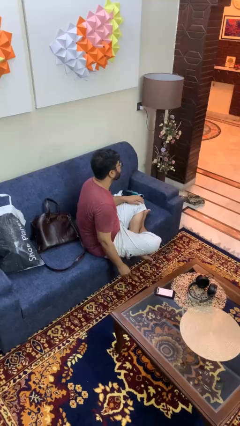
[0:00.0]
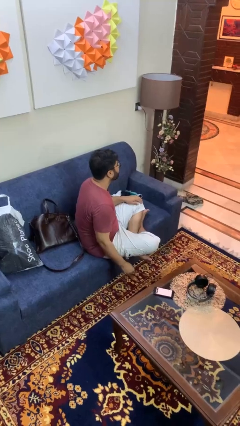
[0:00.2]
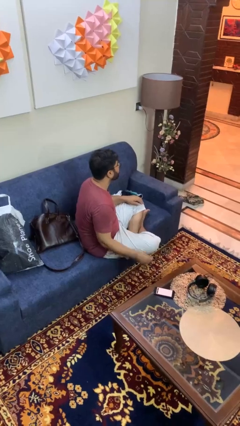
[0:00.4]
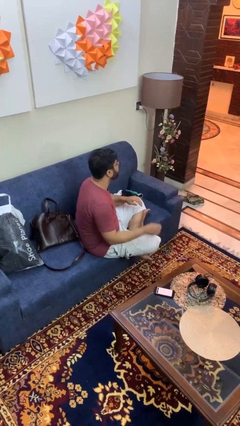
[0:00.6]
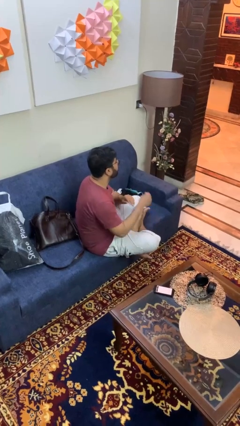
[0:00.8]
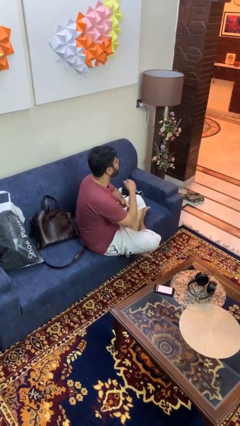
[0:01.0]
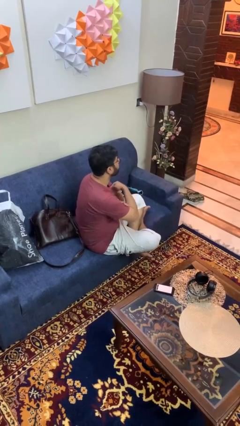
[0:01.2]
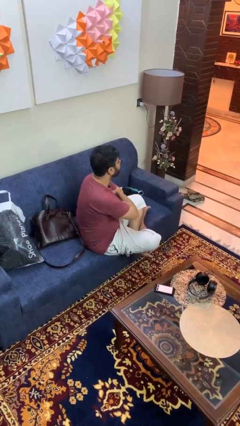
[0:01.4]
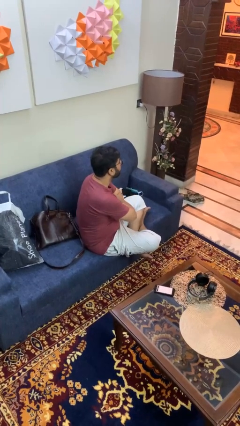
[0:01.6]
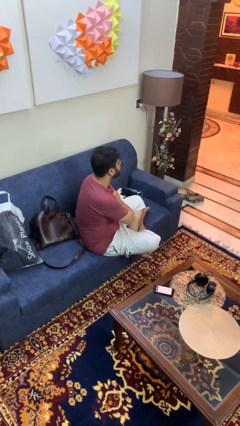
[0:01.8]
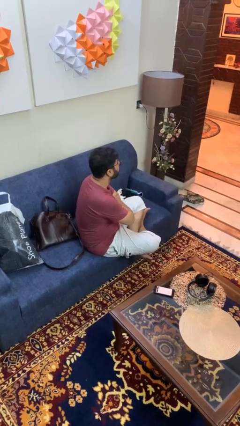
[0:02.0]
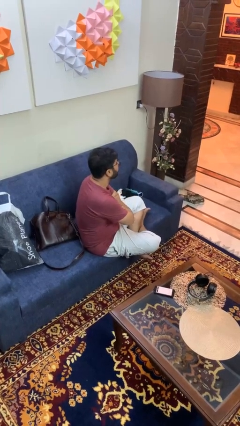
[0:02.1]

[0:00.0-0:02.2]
person crosses arms

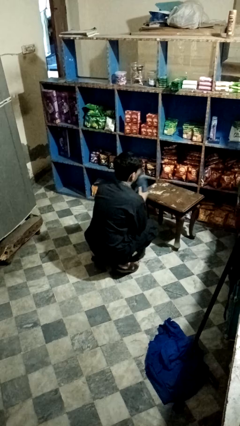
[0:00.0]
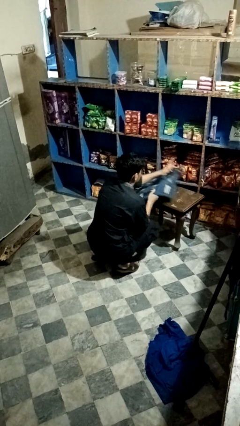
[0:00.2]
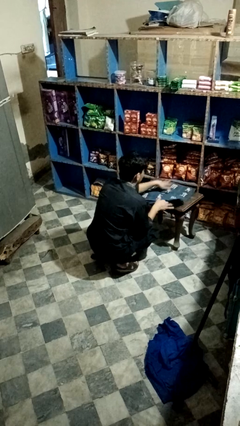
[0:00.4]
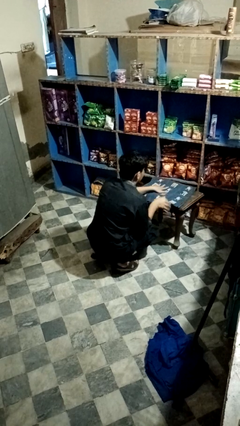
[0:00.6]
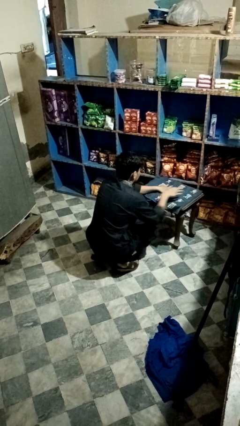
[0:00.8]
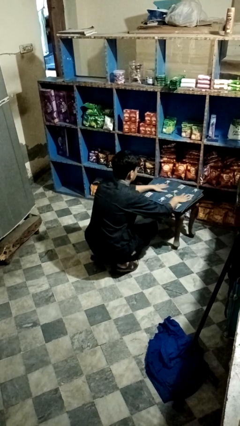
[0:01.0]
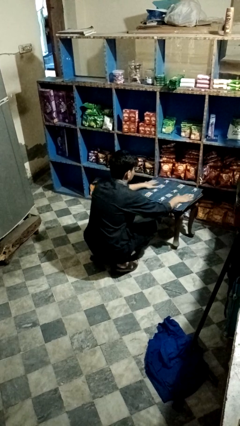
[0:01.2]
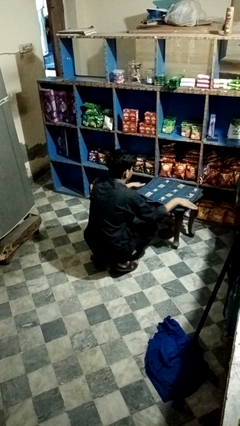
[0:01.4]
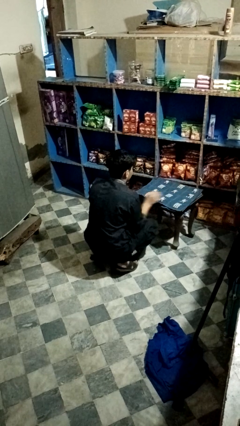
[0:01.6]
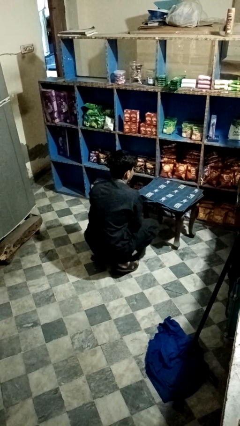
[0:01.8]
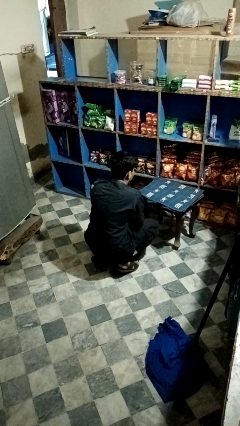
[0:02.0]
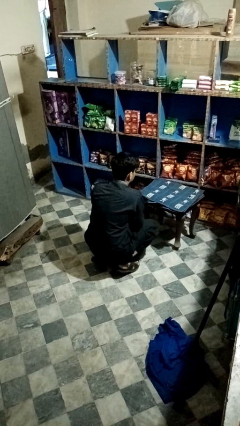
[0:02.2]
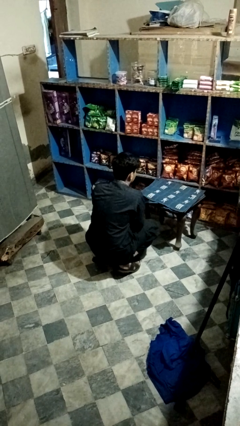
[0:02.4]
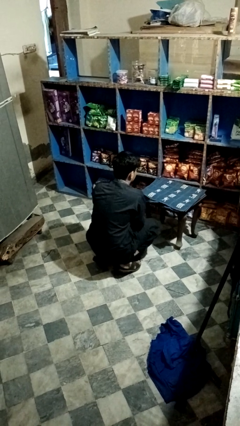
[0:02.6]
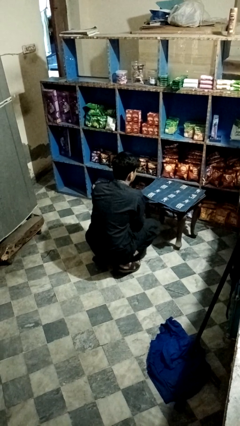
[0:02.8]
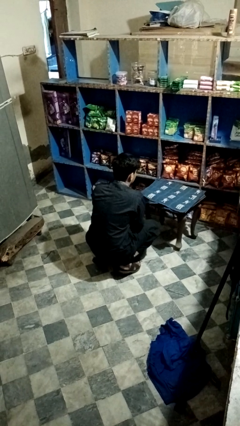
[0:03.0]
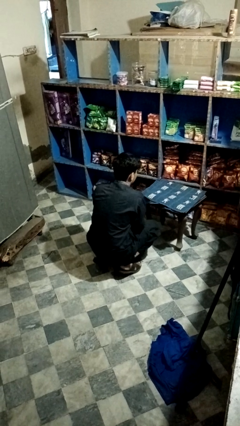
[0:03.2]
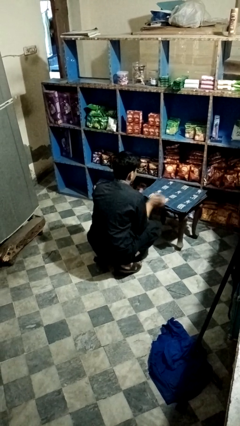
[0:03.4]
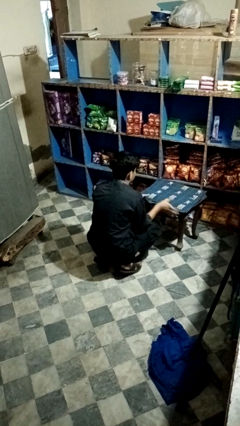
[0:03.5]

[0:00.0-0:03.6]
person spreads tablecloth

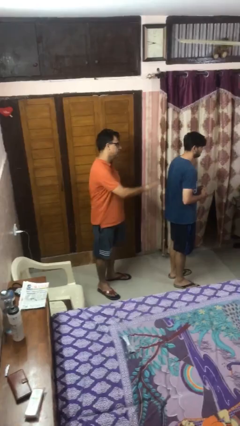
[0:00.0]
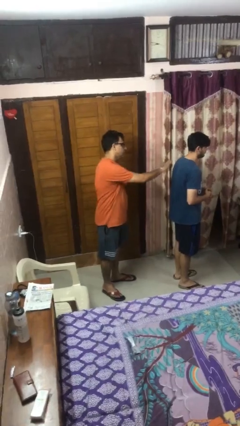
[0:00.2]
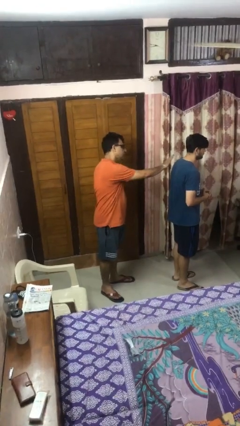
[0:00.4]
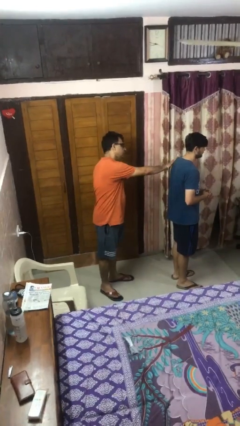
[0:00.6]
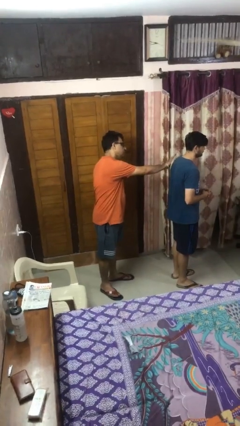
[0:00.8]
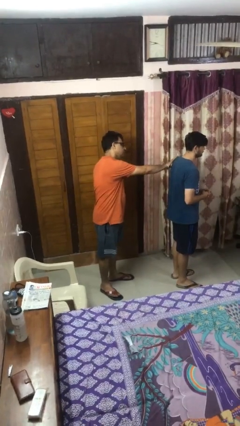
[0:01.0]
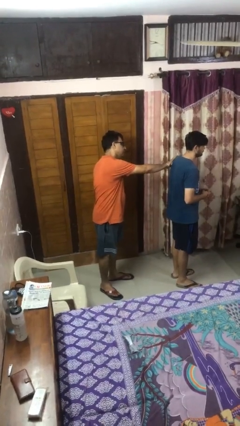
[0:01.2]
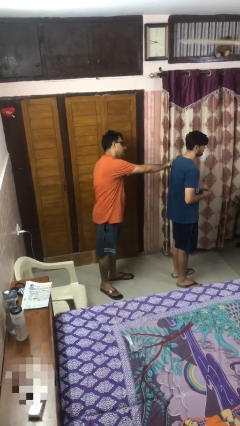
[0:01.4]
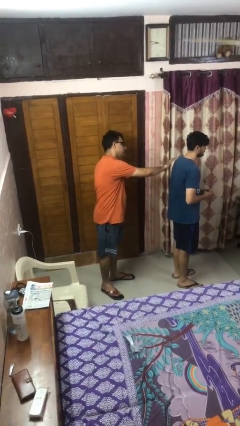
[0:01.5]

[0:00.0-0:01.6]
person touches back of person

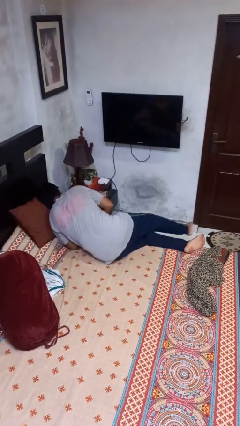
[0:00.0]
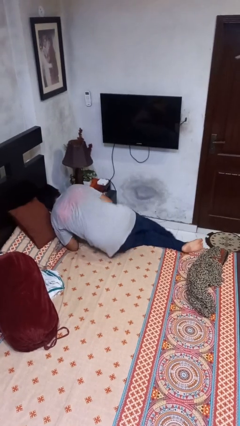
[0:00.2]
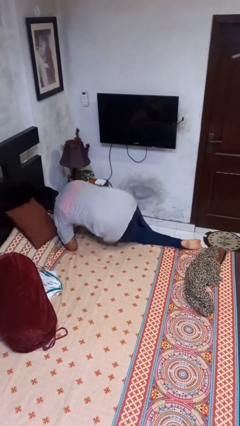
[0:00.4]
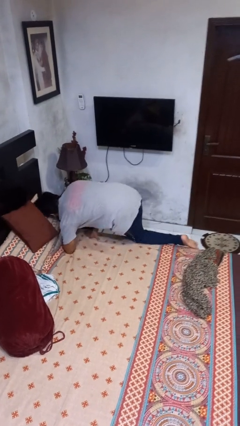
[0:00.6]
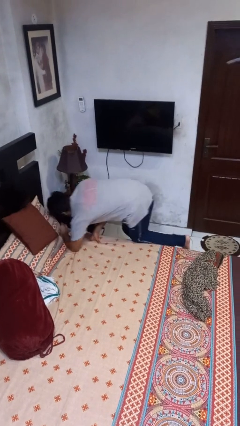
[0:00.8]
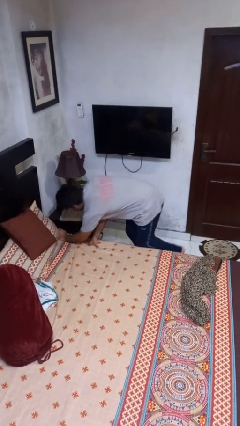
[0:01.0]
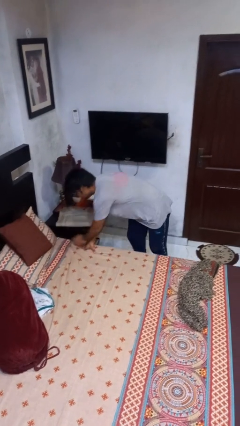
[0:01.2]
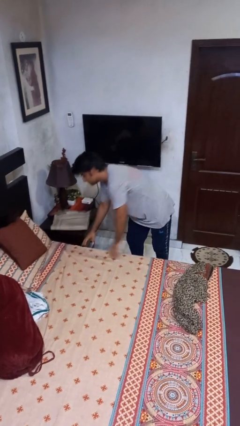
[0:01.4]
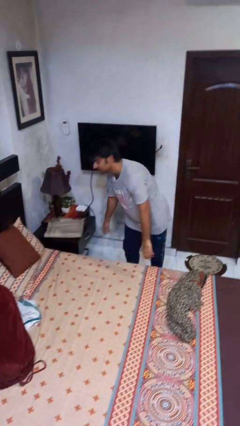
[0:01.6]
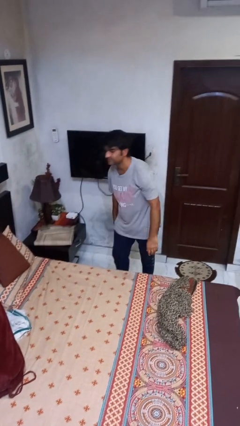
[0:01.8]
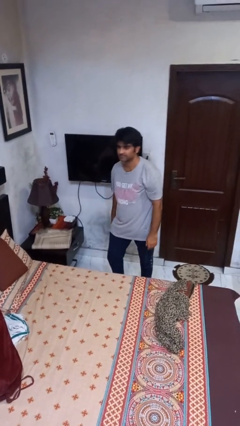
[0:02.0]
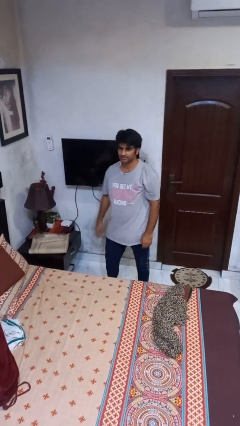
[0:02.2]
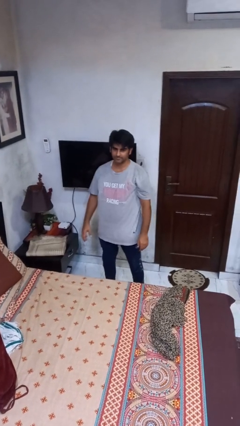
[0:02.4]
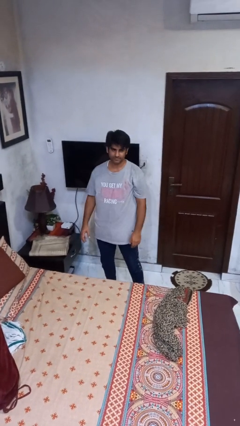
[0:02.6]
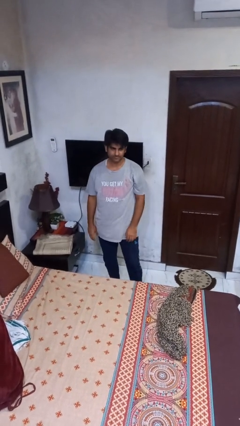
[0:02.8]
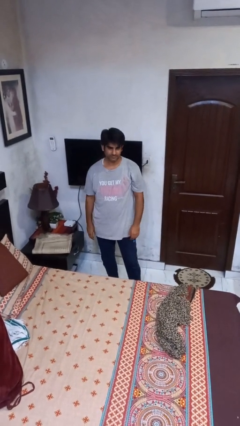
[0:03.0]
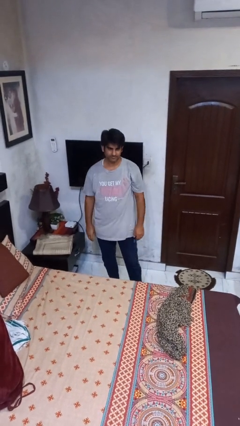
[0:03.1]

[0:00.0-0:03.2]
person stands up

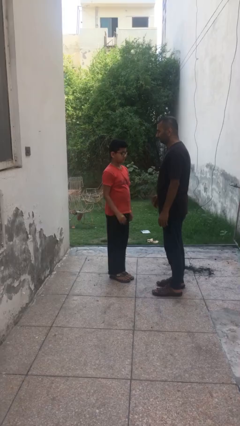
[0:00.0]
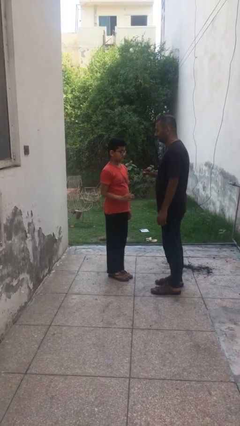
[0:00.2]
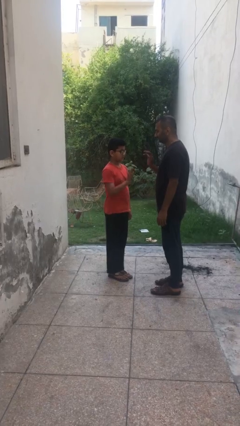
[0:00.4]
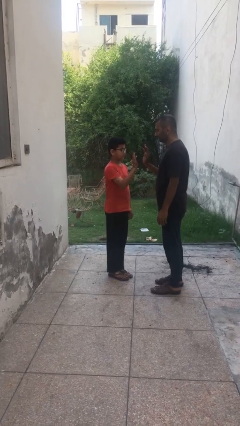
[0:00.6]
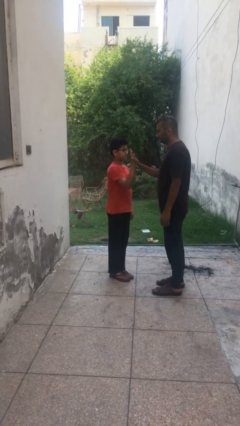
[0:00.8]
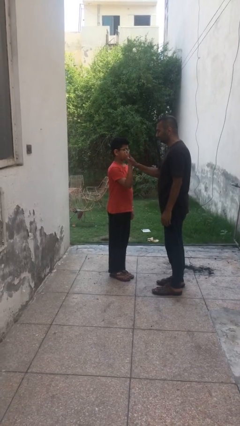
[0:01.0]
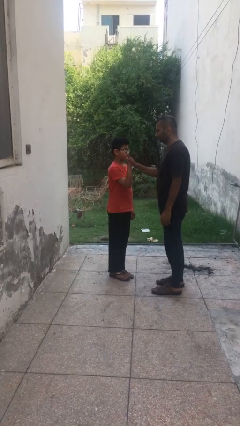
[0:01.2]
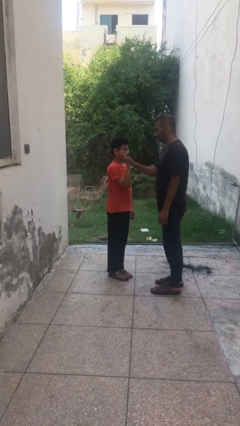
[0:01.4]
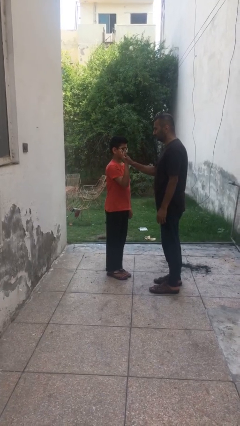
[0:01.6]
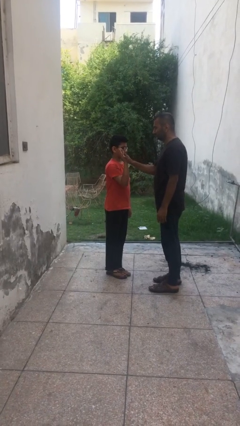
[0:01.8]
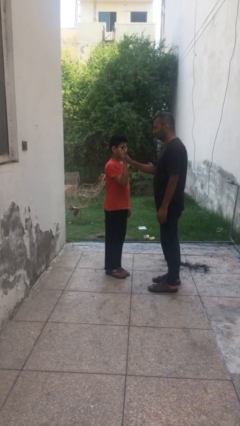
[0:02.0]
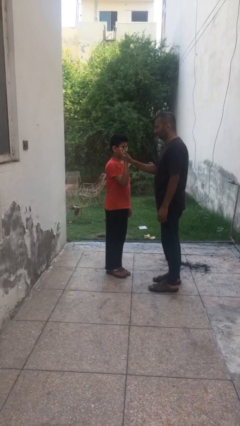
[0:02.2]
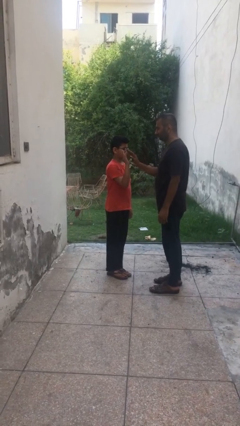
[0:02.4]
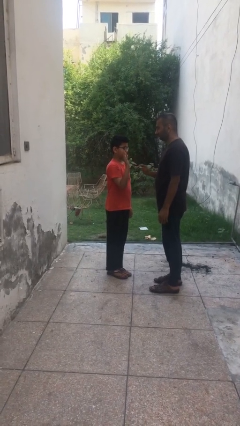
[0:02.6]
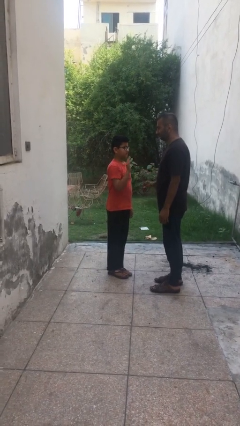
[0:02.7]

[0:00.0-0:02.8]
person highfives hand

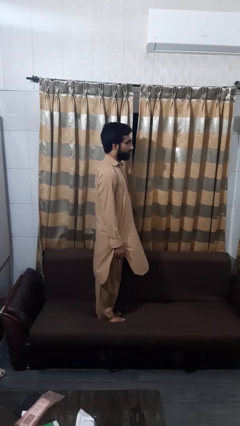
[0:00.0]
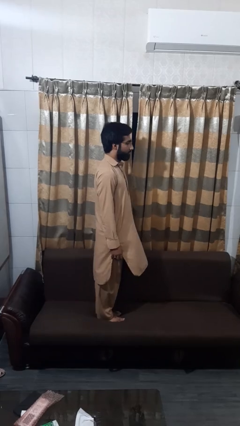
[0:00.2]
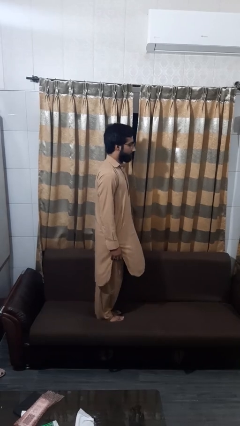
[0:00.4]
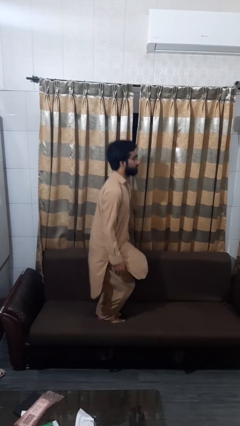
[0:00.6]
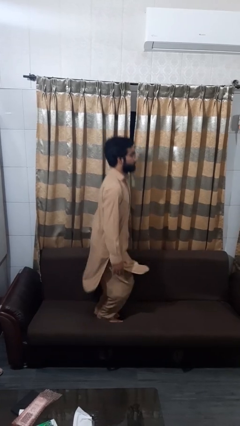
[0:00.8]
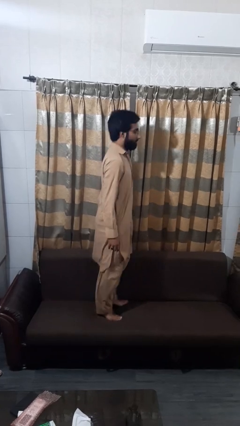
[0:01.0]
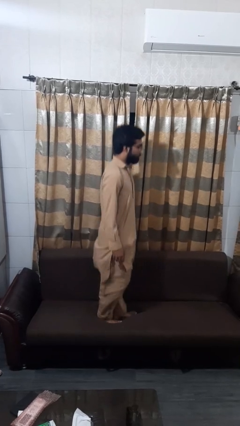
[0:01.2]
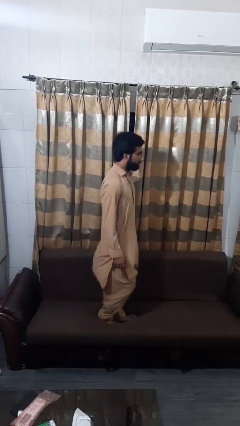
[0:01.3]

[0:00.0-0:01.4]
person jumps on couch

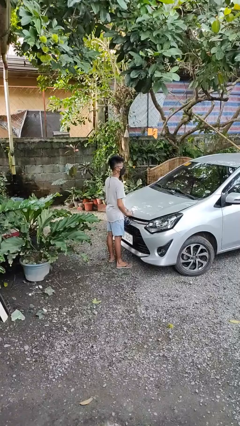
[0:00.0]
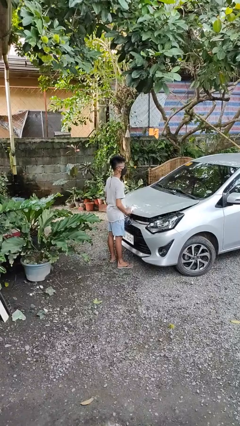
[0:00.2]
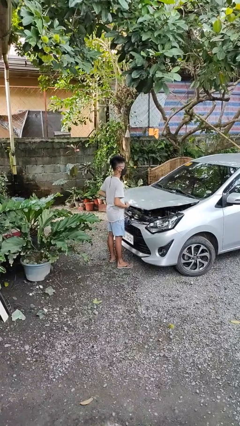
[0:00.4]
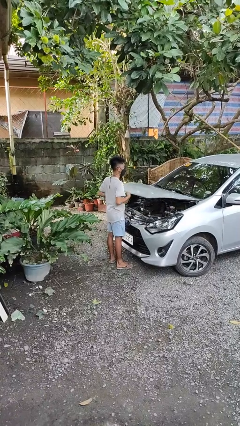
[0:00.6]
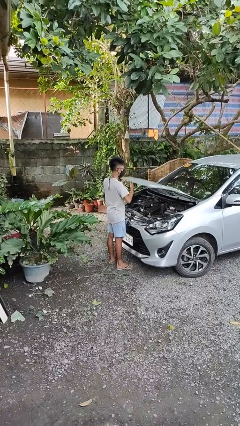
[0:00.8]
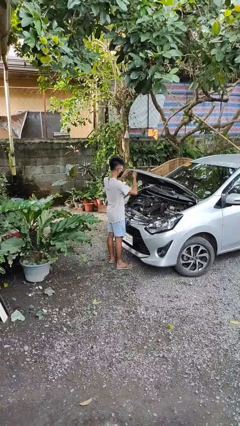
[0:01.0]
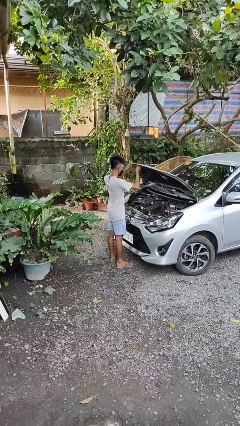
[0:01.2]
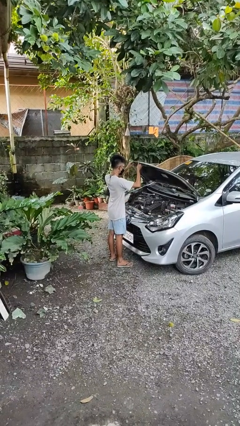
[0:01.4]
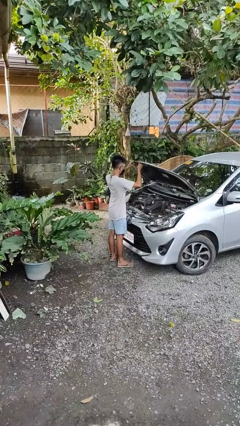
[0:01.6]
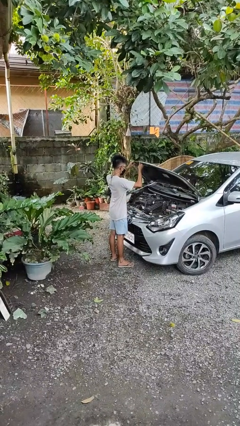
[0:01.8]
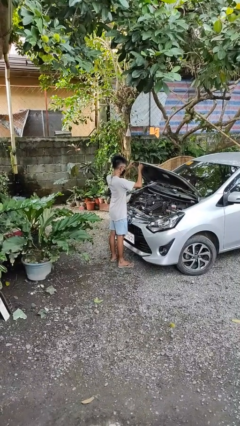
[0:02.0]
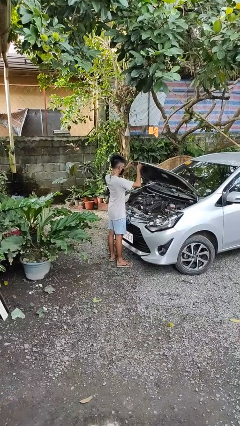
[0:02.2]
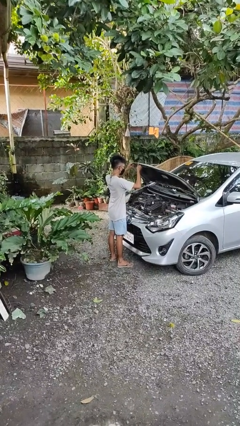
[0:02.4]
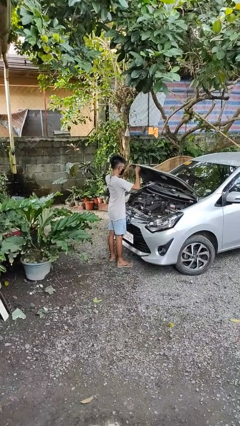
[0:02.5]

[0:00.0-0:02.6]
person opens car hood
